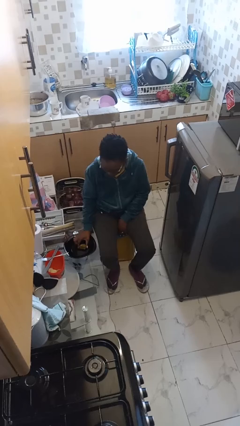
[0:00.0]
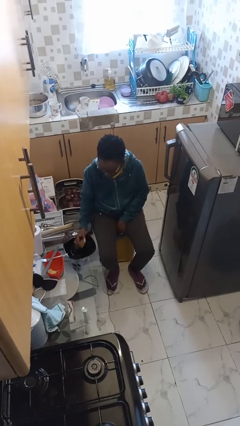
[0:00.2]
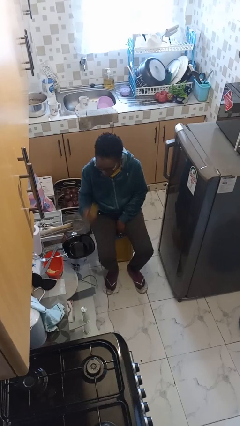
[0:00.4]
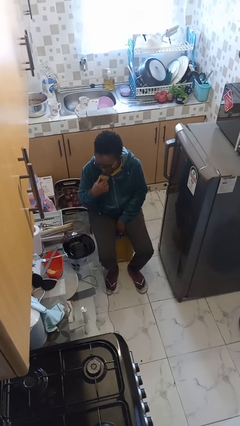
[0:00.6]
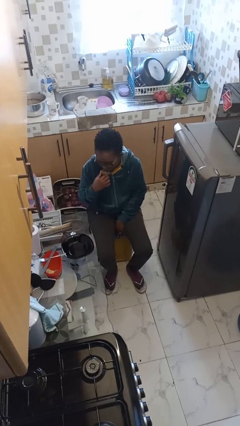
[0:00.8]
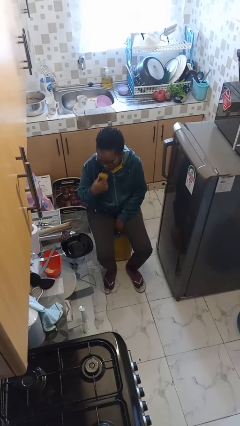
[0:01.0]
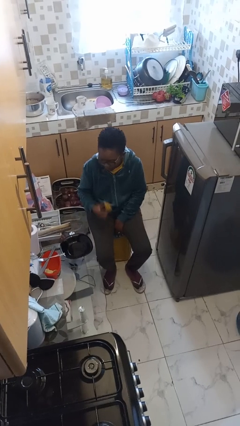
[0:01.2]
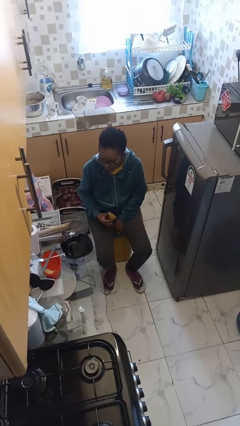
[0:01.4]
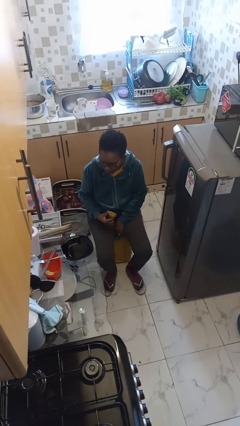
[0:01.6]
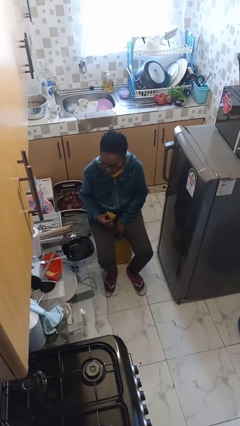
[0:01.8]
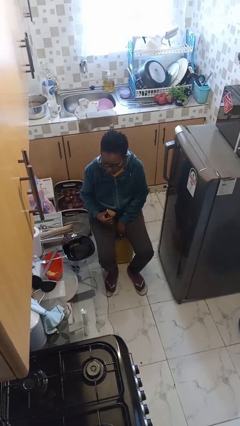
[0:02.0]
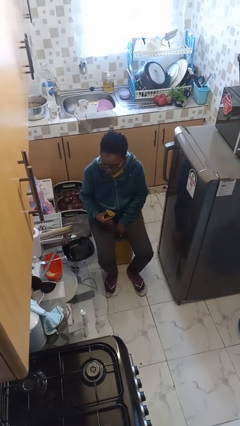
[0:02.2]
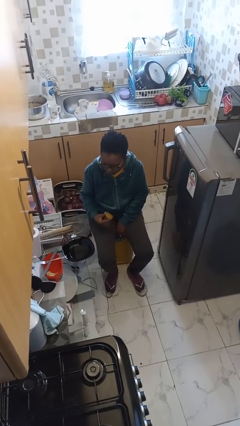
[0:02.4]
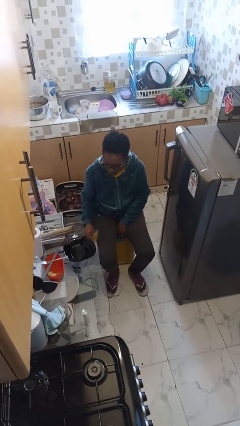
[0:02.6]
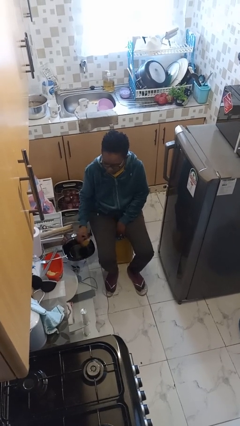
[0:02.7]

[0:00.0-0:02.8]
person eats with hands

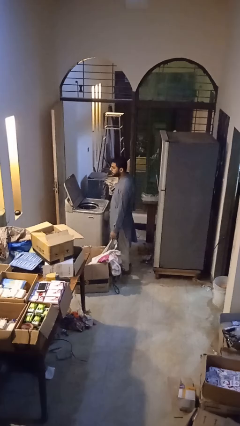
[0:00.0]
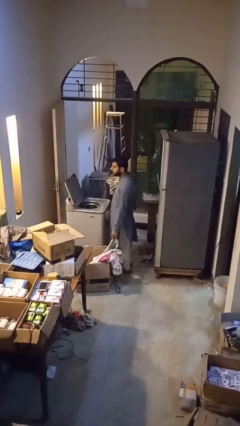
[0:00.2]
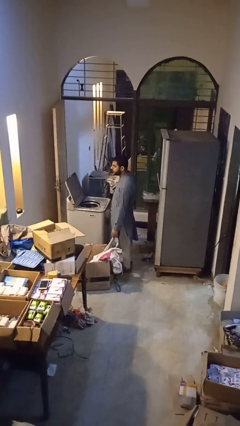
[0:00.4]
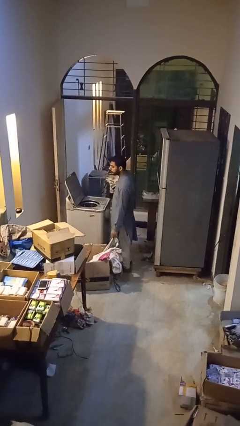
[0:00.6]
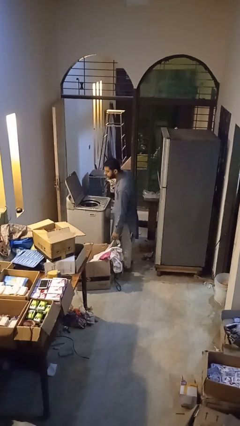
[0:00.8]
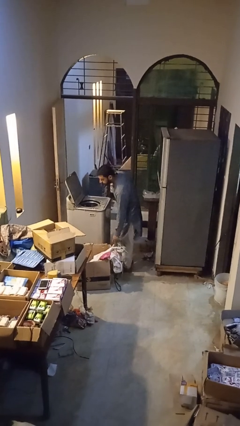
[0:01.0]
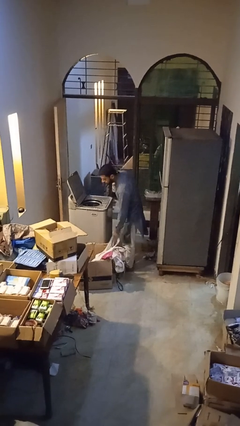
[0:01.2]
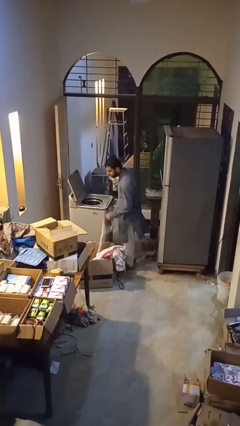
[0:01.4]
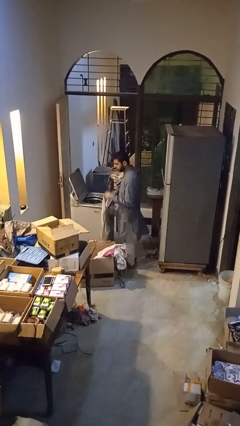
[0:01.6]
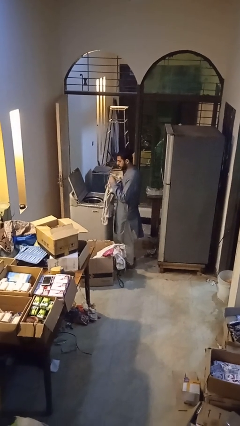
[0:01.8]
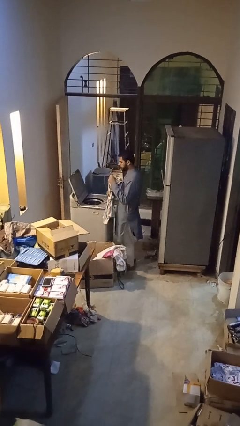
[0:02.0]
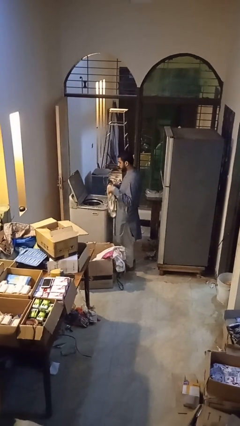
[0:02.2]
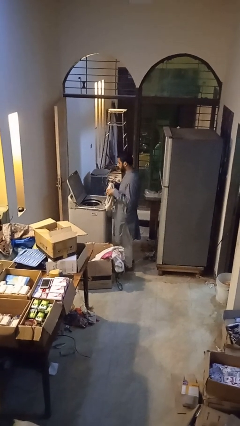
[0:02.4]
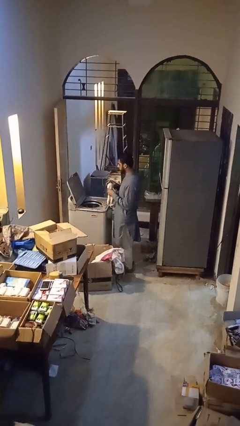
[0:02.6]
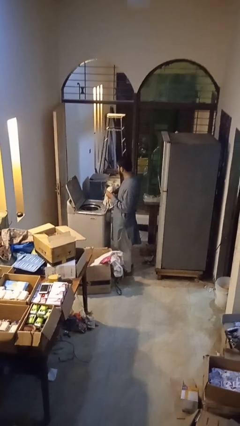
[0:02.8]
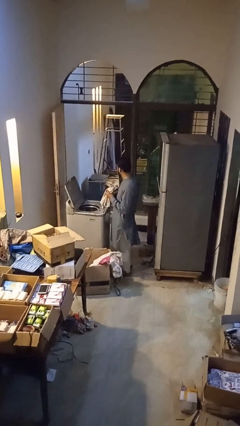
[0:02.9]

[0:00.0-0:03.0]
person unloads clotheswasher

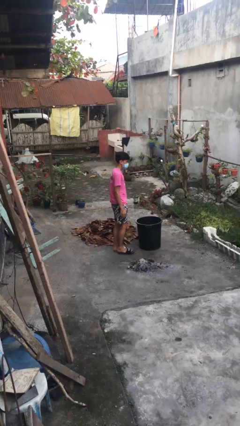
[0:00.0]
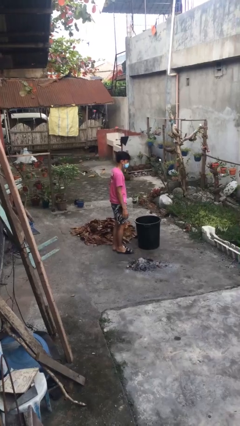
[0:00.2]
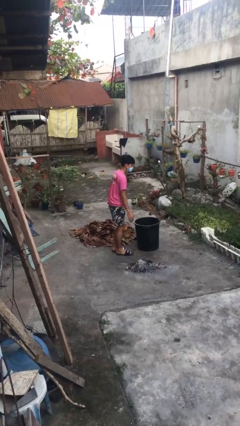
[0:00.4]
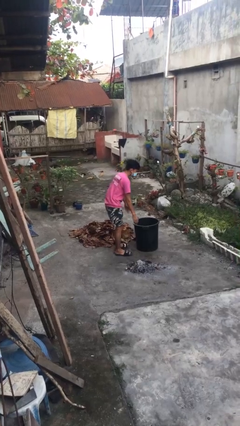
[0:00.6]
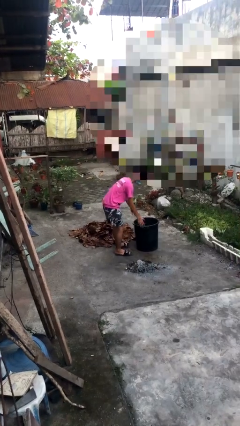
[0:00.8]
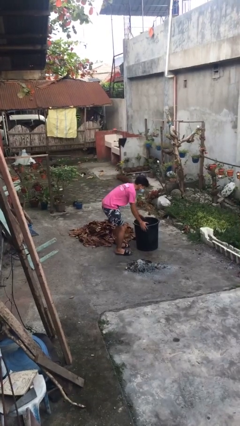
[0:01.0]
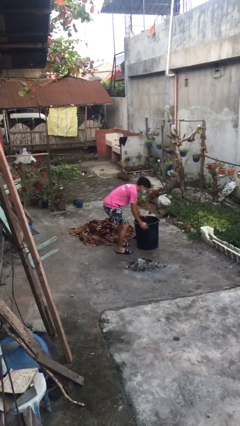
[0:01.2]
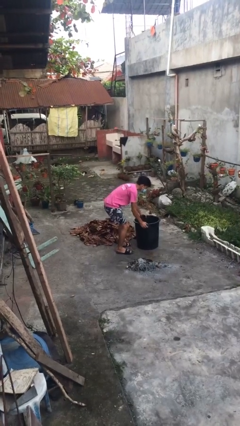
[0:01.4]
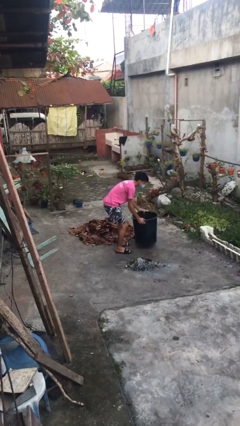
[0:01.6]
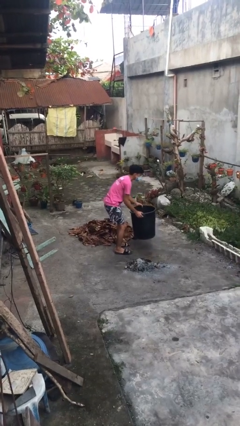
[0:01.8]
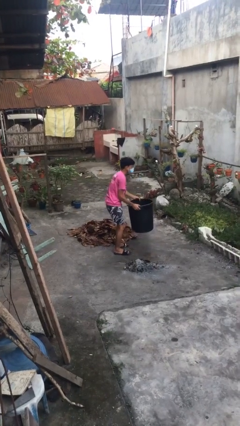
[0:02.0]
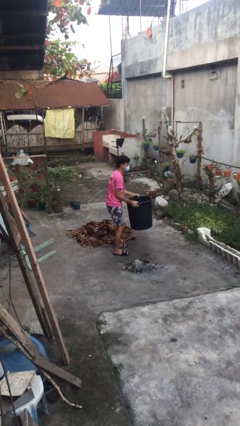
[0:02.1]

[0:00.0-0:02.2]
person picks up object from floor

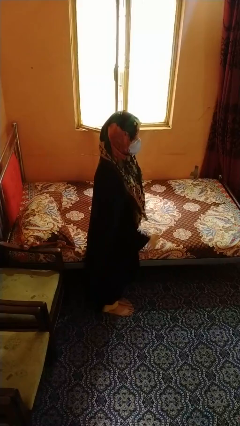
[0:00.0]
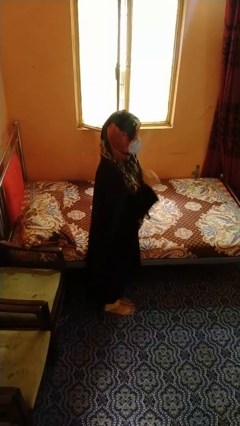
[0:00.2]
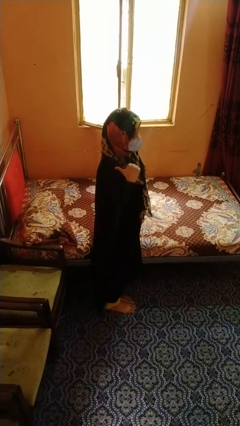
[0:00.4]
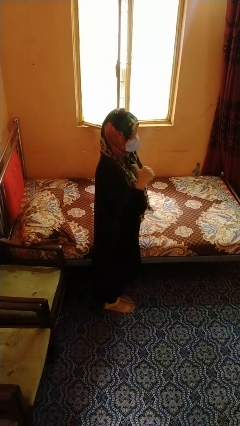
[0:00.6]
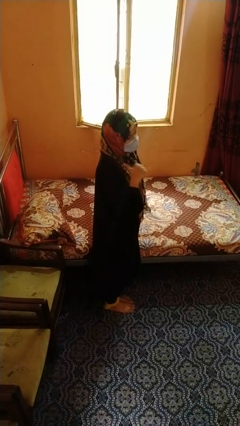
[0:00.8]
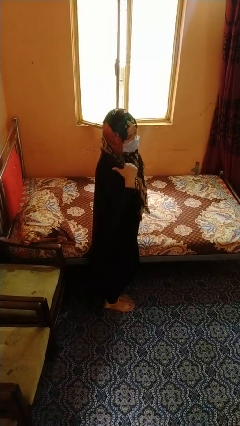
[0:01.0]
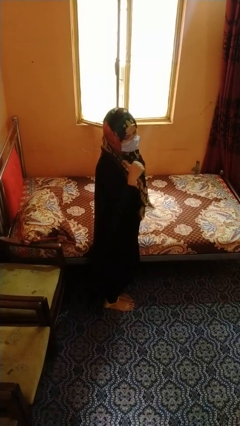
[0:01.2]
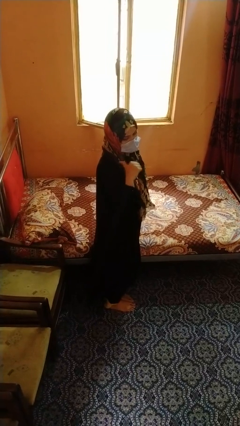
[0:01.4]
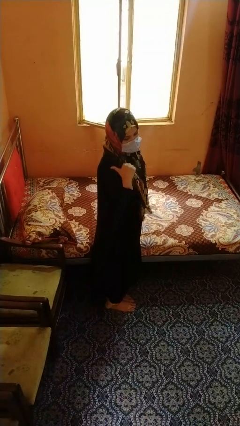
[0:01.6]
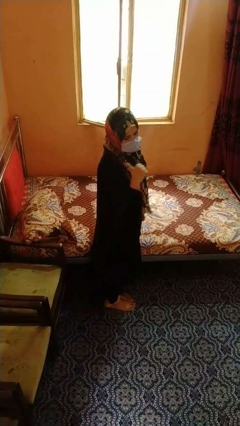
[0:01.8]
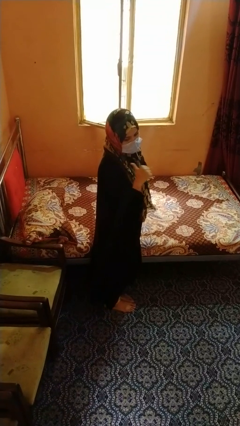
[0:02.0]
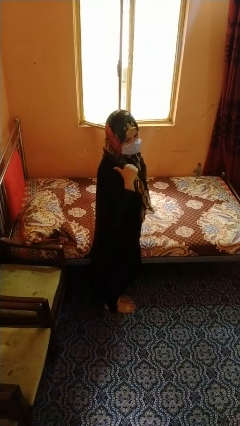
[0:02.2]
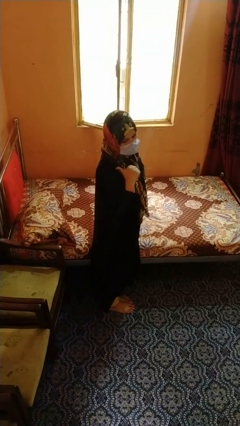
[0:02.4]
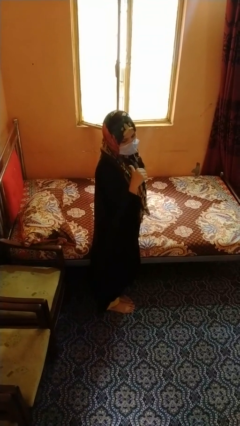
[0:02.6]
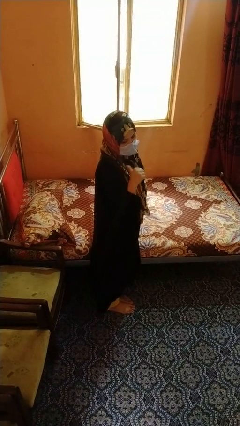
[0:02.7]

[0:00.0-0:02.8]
person gestures behind me

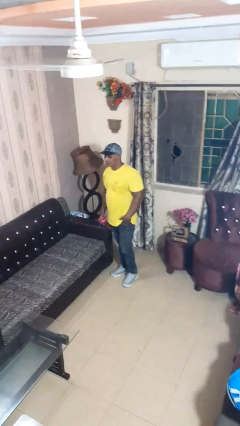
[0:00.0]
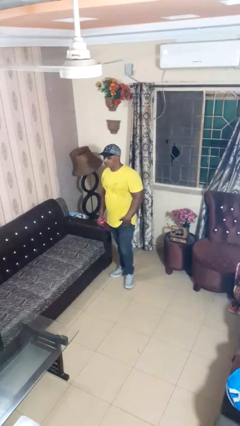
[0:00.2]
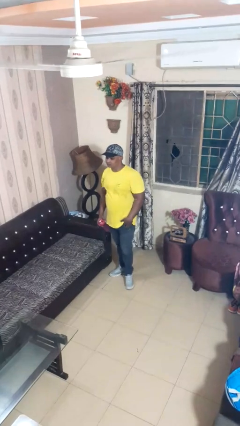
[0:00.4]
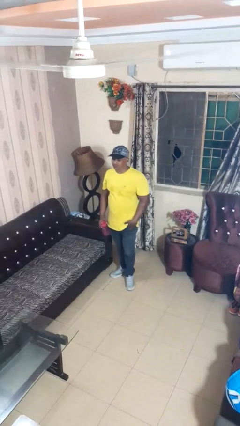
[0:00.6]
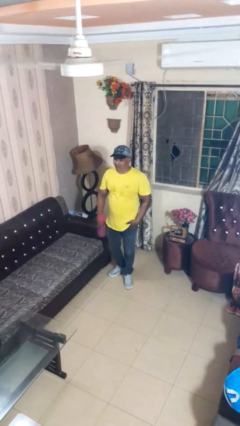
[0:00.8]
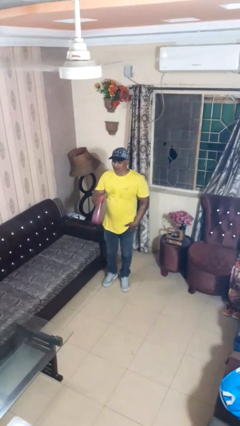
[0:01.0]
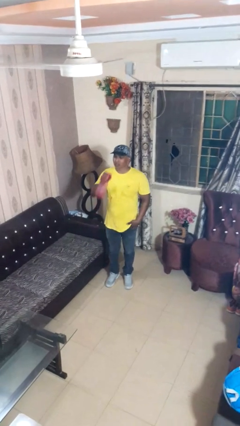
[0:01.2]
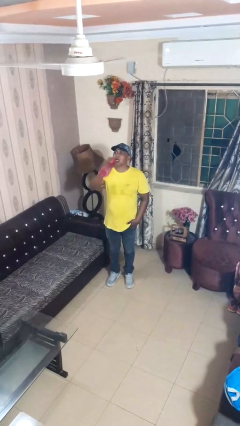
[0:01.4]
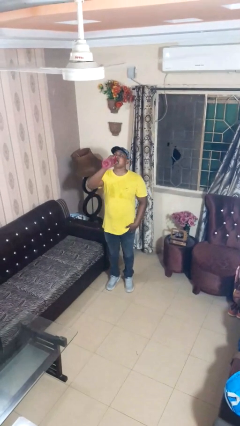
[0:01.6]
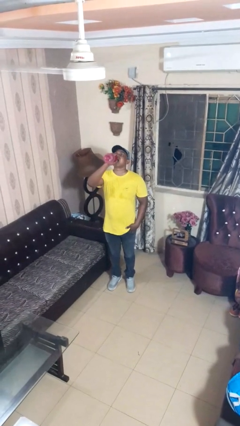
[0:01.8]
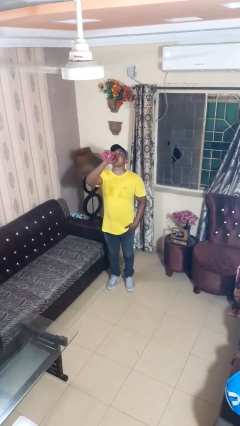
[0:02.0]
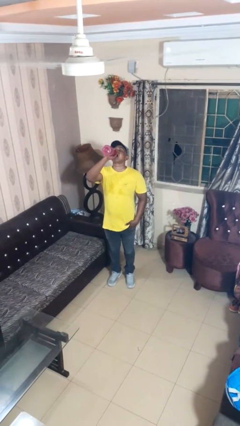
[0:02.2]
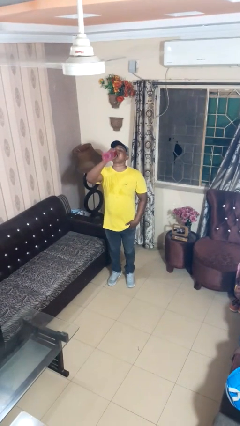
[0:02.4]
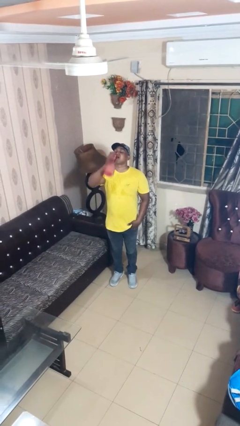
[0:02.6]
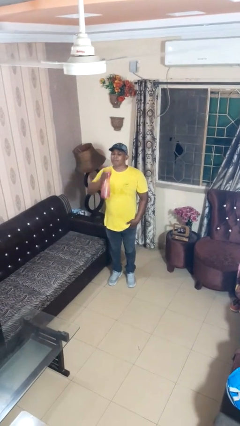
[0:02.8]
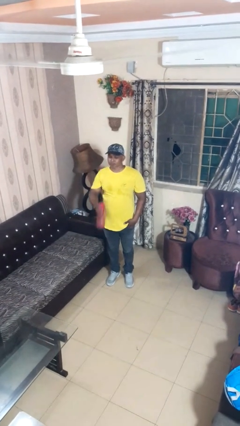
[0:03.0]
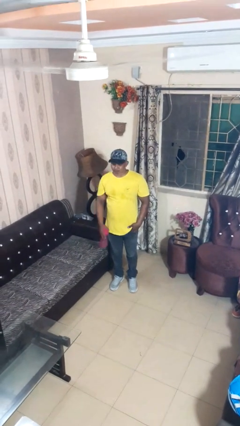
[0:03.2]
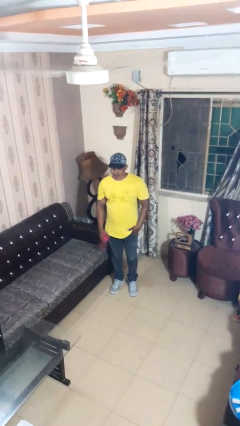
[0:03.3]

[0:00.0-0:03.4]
person drinks from bottle

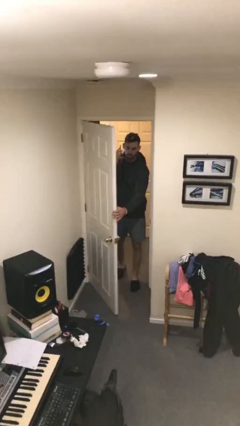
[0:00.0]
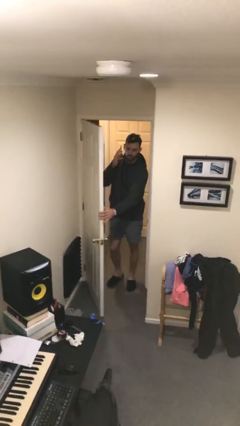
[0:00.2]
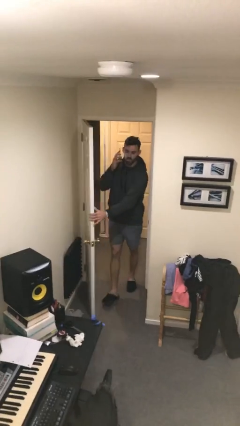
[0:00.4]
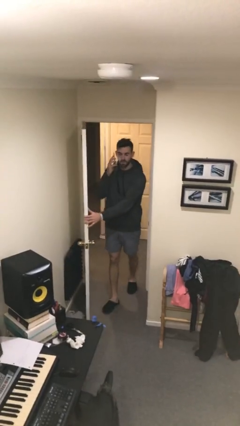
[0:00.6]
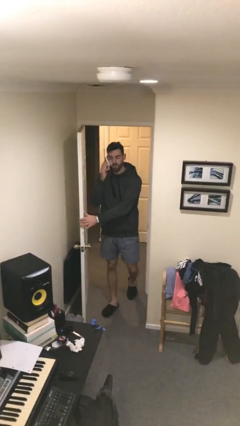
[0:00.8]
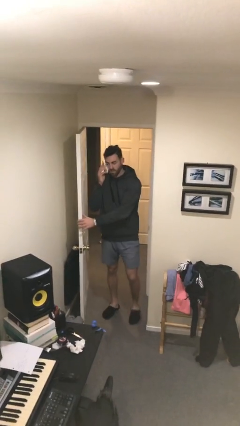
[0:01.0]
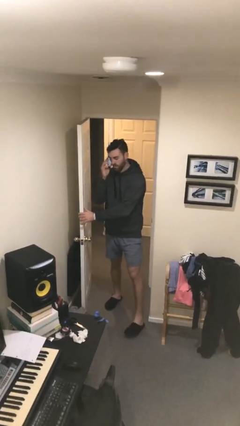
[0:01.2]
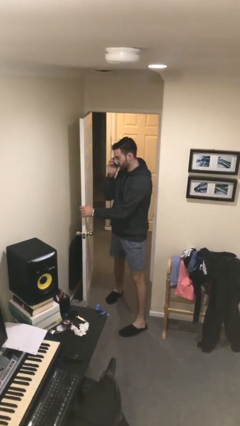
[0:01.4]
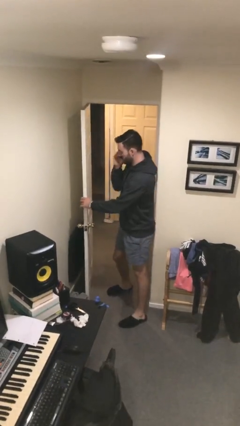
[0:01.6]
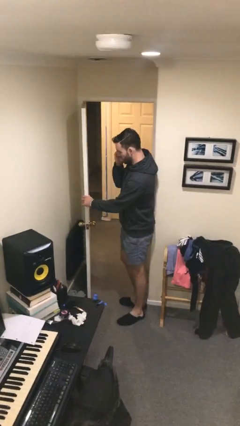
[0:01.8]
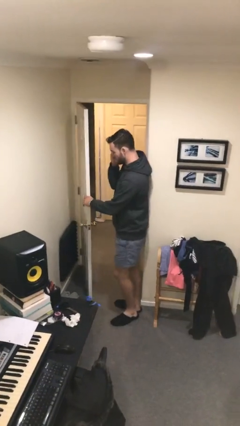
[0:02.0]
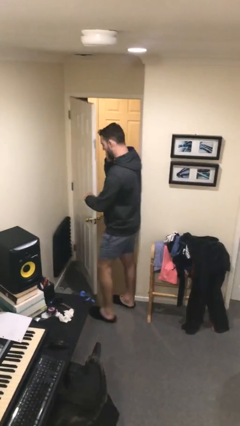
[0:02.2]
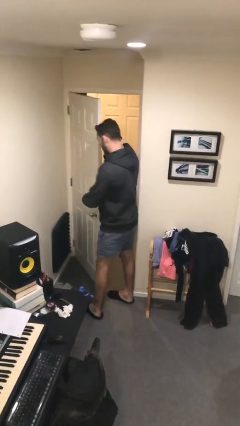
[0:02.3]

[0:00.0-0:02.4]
person enters scene through structure

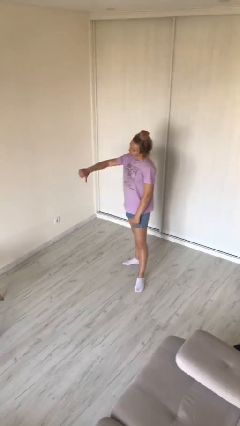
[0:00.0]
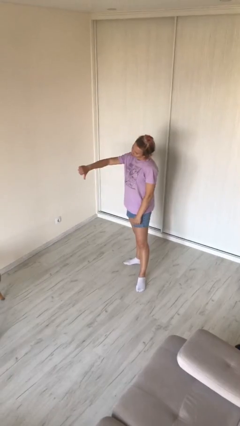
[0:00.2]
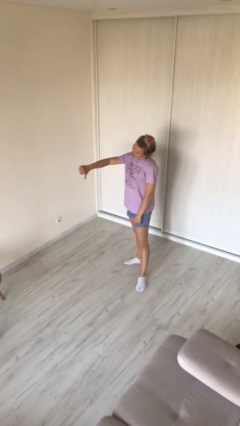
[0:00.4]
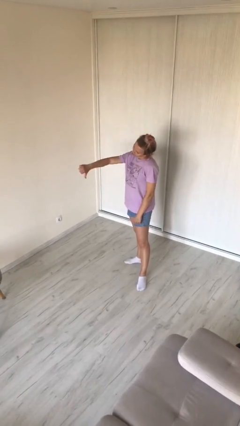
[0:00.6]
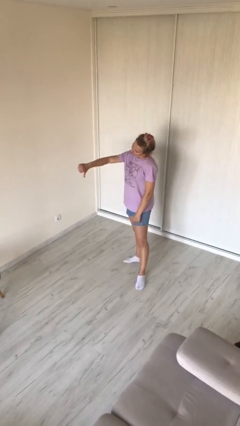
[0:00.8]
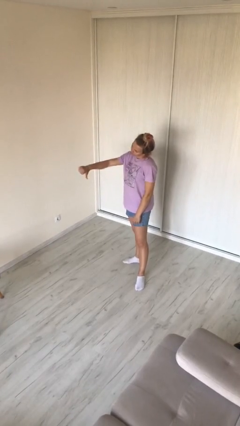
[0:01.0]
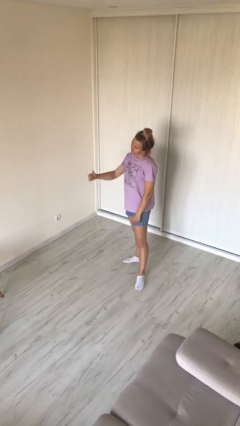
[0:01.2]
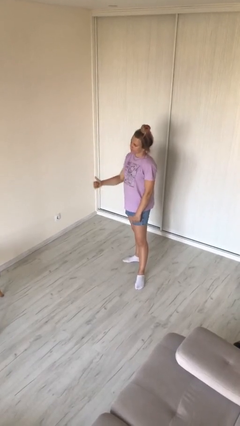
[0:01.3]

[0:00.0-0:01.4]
person gestures thumbs down
